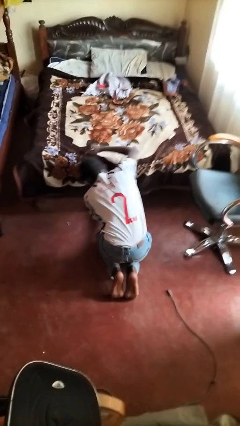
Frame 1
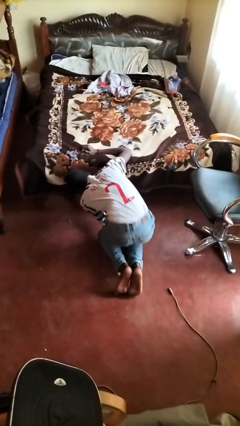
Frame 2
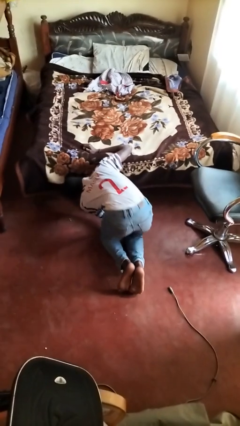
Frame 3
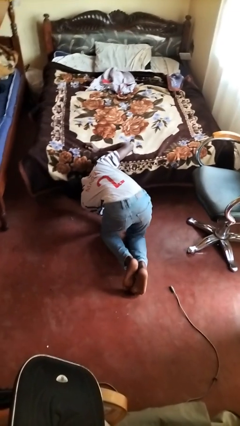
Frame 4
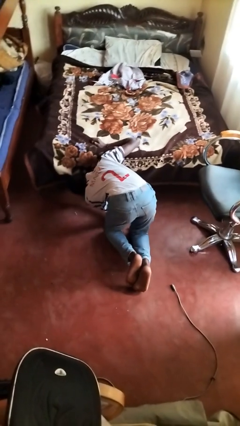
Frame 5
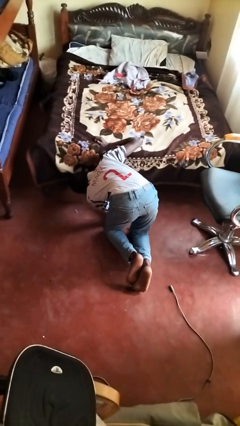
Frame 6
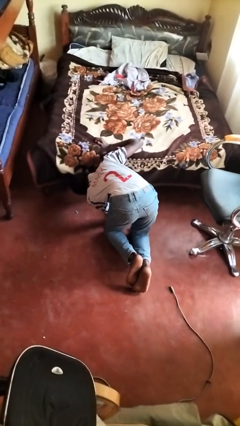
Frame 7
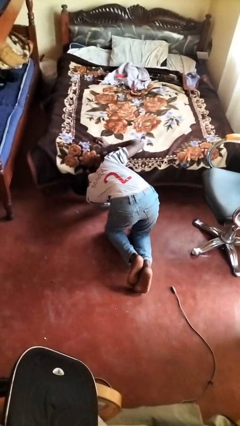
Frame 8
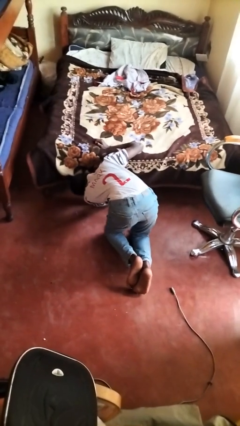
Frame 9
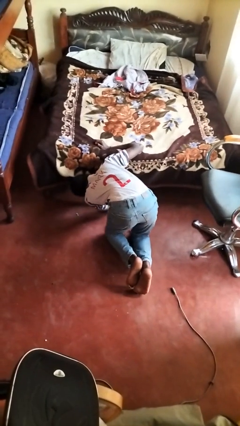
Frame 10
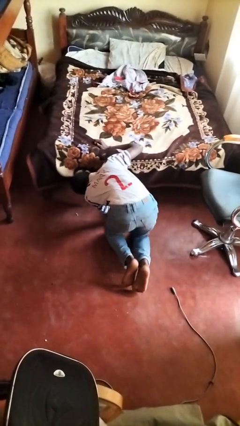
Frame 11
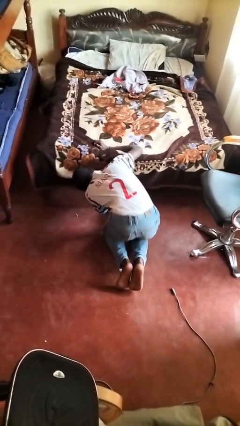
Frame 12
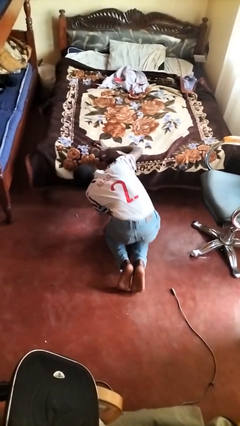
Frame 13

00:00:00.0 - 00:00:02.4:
person searches under bed

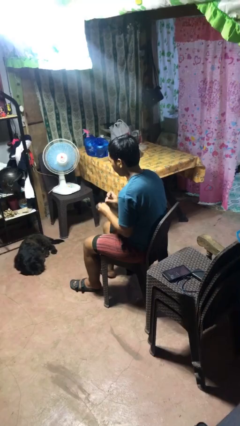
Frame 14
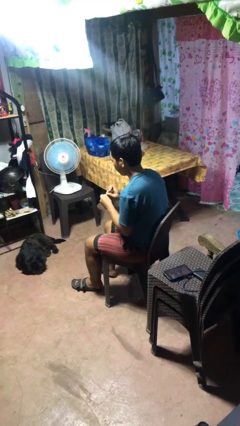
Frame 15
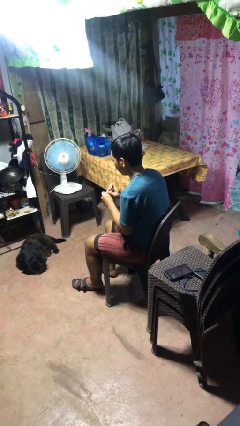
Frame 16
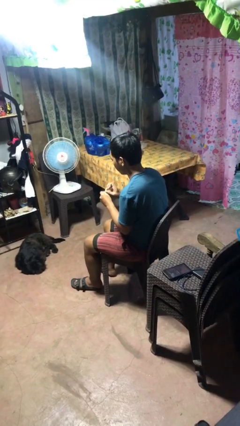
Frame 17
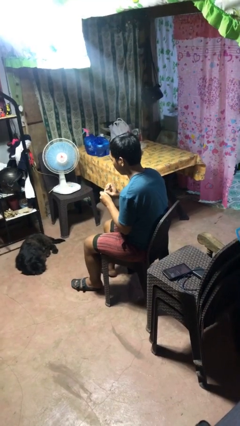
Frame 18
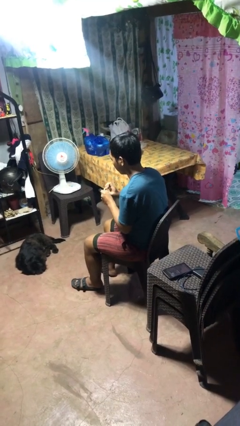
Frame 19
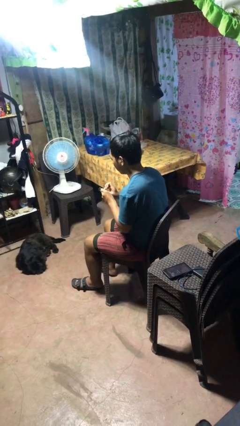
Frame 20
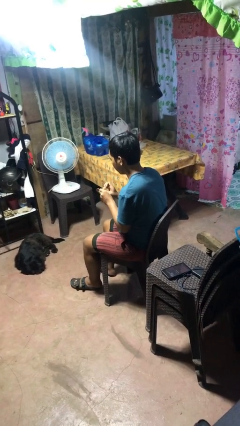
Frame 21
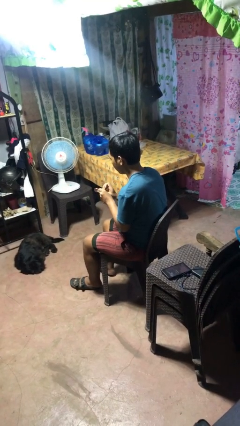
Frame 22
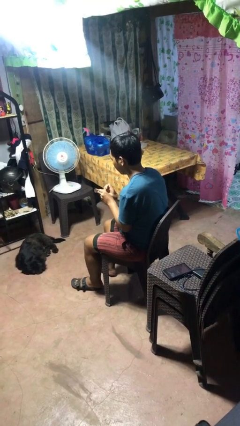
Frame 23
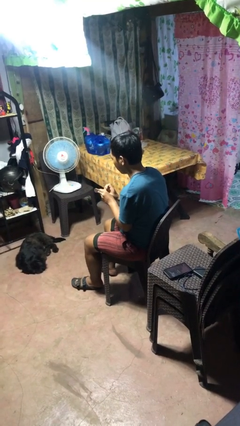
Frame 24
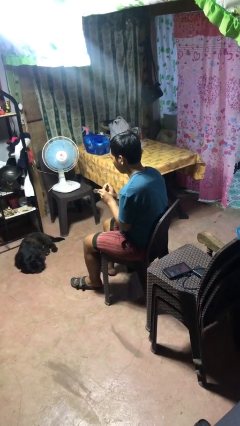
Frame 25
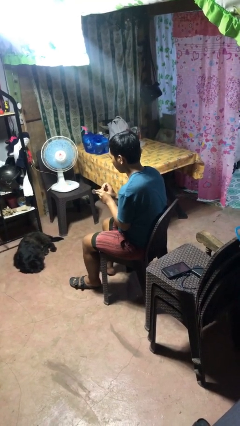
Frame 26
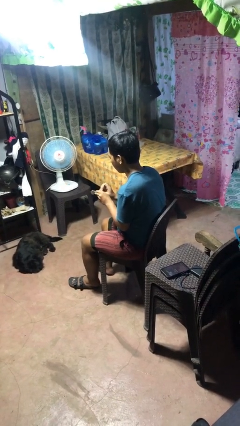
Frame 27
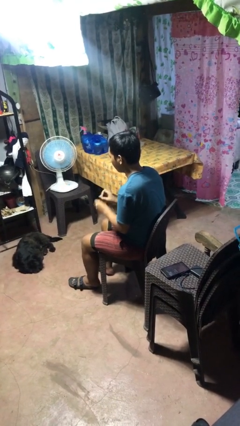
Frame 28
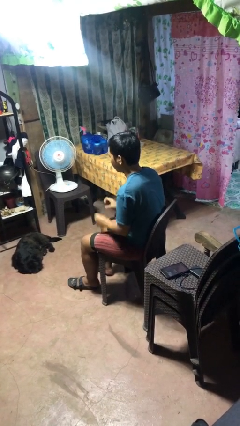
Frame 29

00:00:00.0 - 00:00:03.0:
person files fingernails

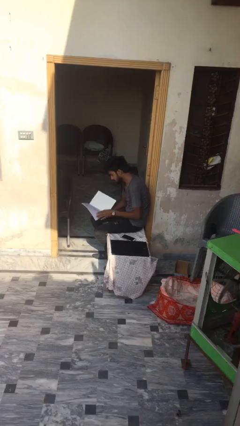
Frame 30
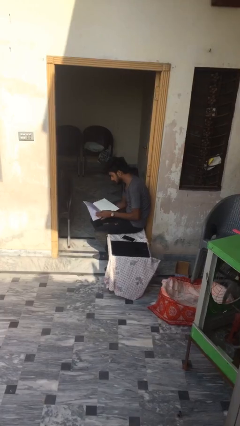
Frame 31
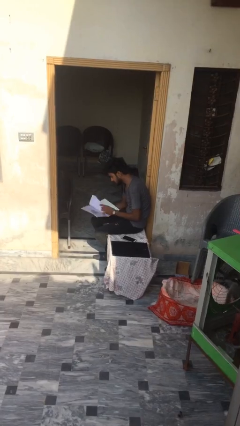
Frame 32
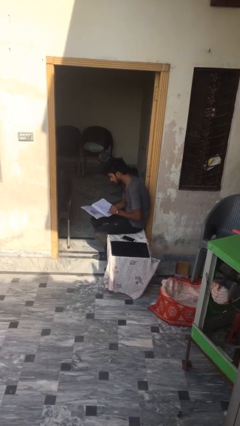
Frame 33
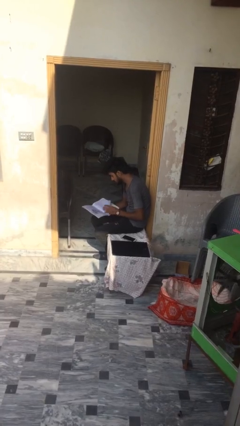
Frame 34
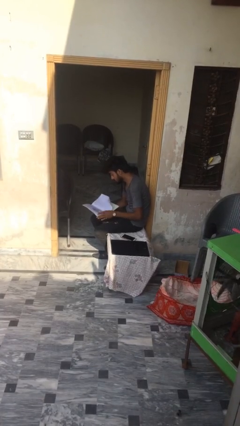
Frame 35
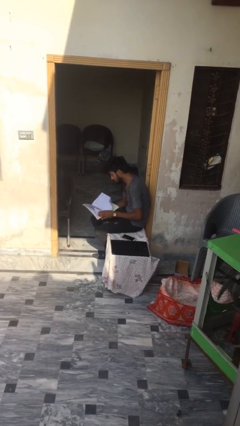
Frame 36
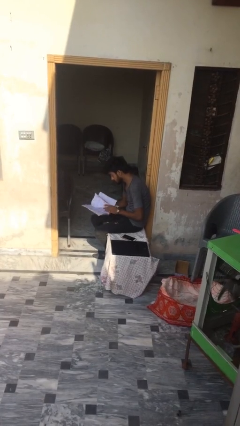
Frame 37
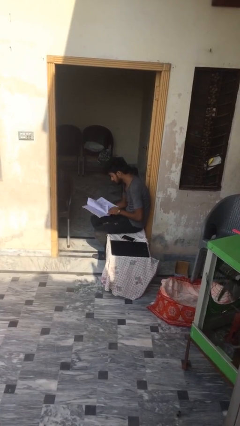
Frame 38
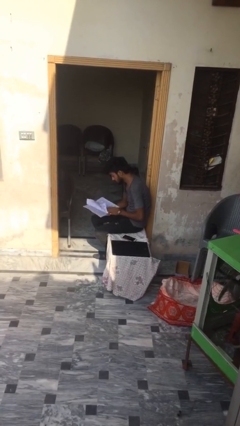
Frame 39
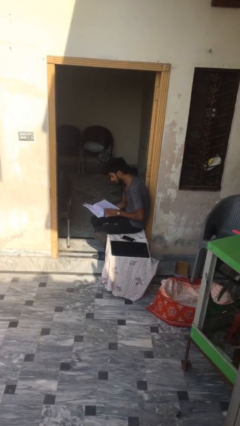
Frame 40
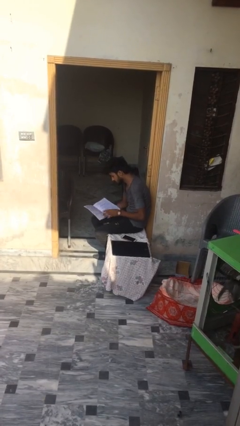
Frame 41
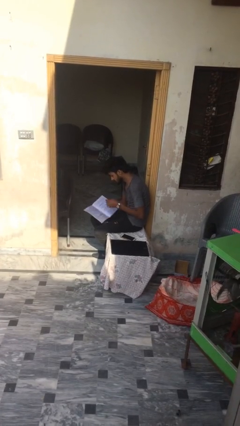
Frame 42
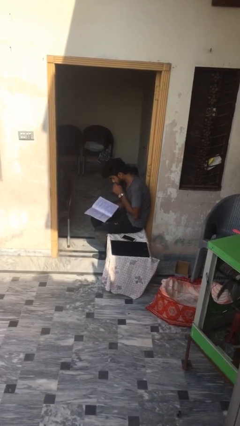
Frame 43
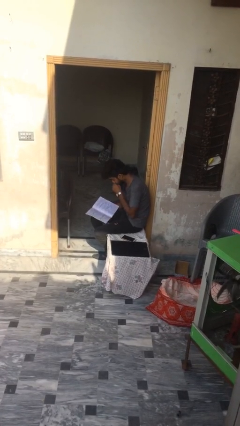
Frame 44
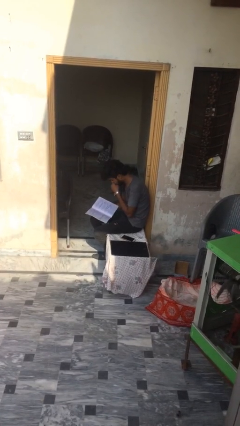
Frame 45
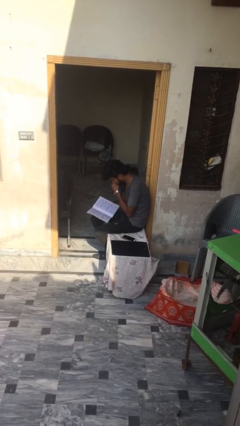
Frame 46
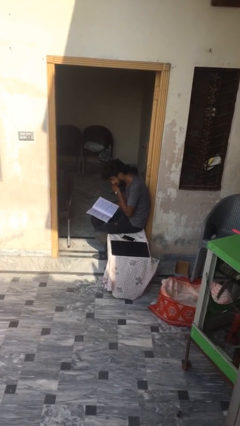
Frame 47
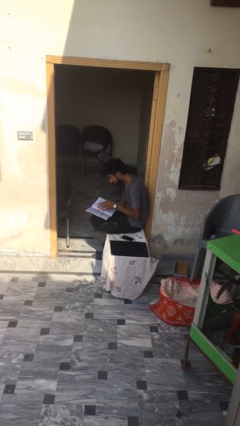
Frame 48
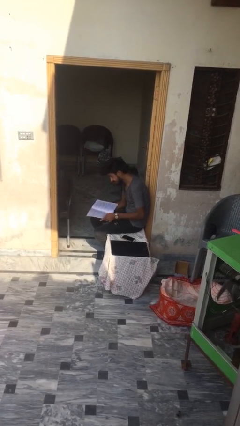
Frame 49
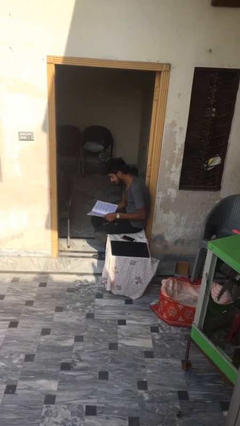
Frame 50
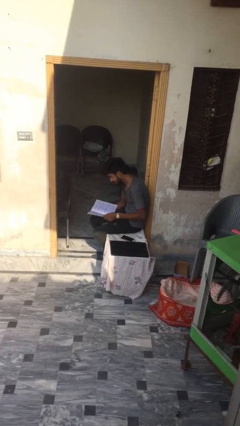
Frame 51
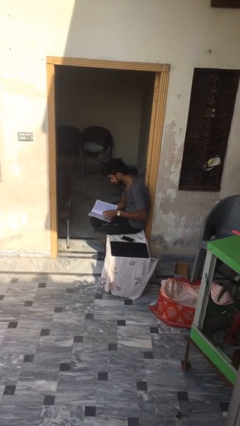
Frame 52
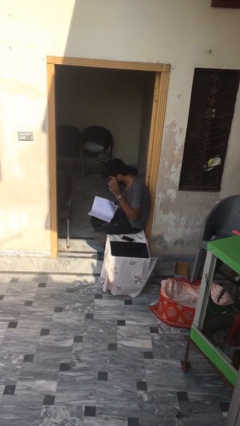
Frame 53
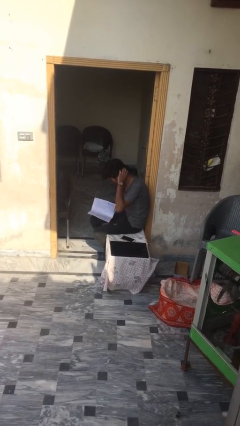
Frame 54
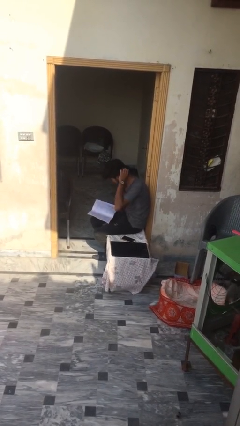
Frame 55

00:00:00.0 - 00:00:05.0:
person reads document

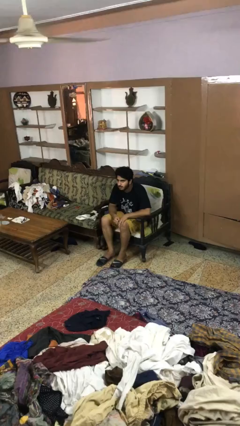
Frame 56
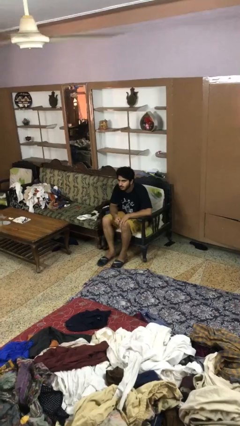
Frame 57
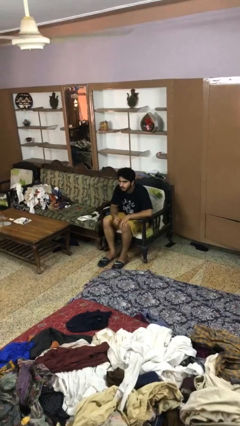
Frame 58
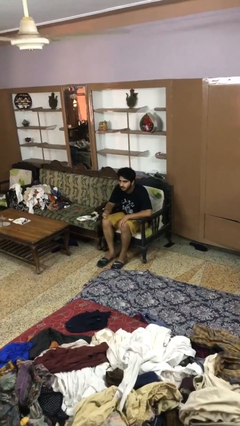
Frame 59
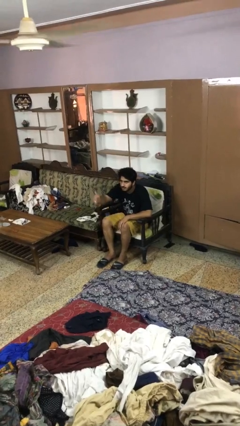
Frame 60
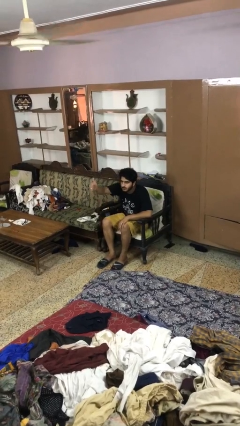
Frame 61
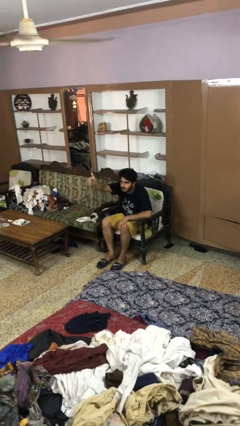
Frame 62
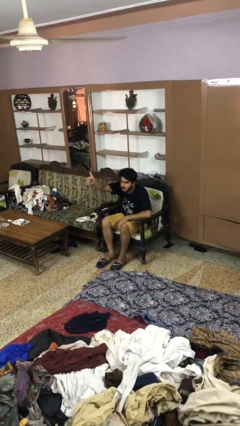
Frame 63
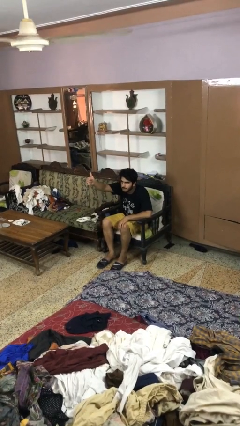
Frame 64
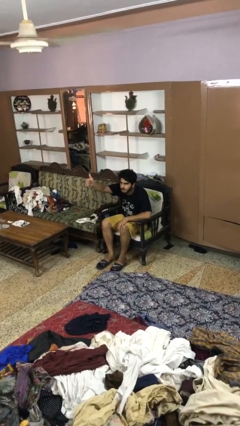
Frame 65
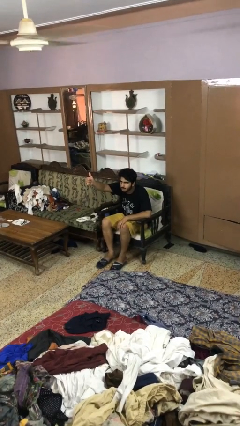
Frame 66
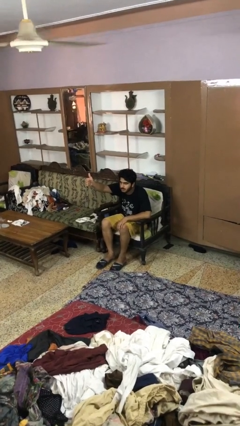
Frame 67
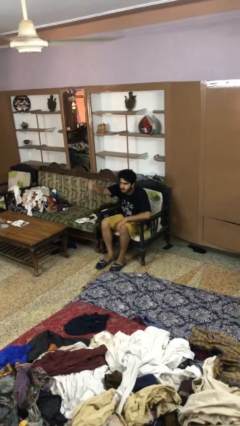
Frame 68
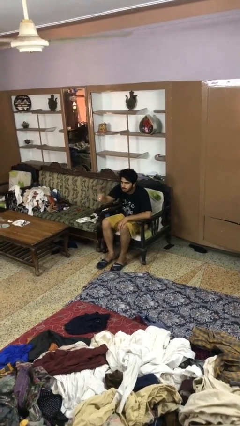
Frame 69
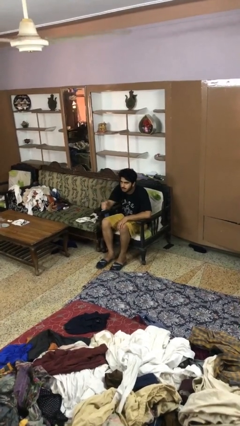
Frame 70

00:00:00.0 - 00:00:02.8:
person gestures thumbs up

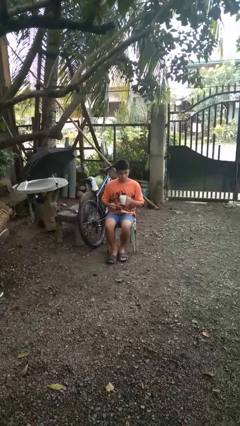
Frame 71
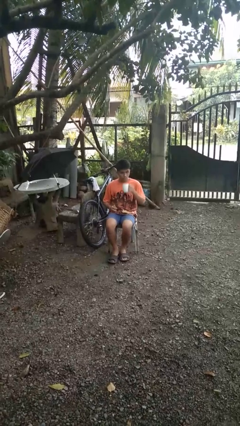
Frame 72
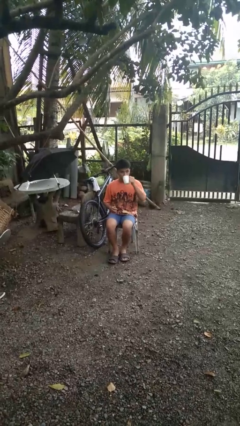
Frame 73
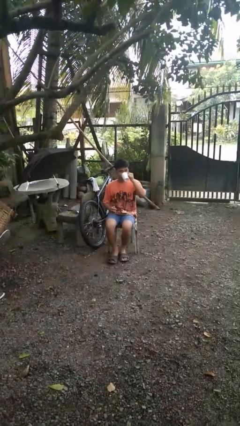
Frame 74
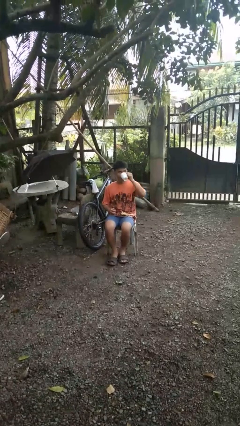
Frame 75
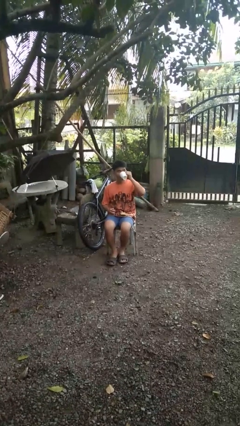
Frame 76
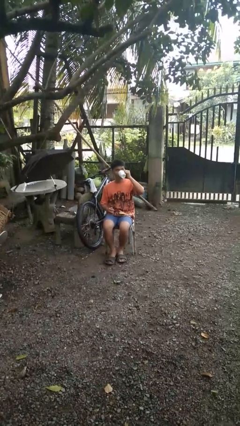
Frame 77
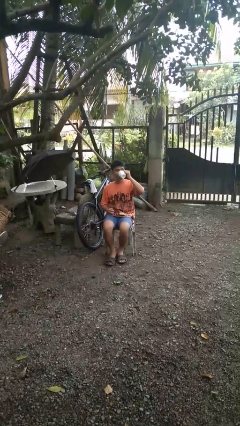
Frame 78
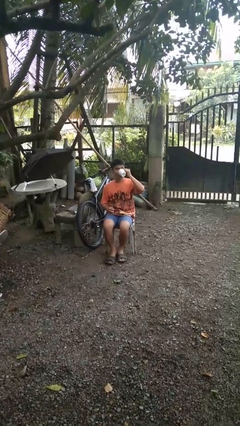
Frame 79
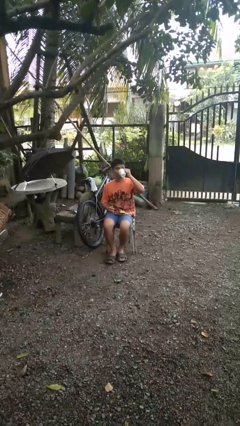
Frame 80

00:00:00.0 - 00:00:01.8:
person drinks from mug

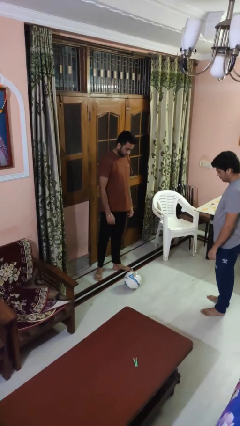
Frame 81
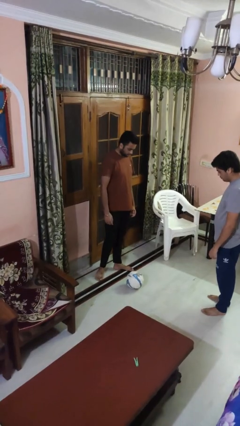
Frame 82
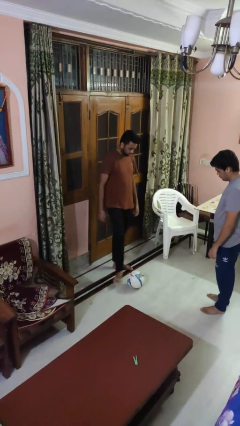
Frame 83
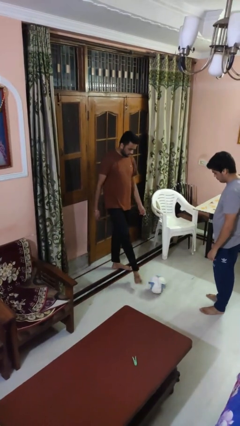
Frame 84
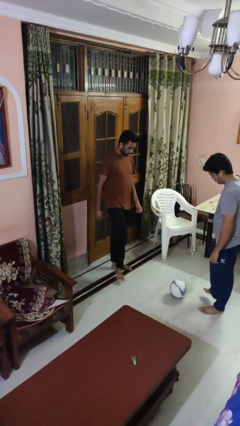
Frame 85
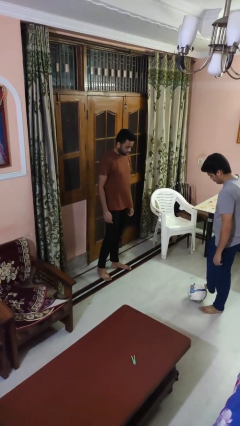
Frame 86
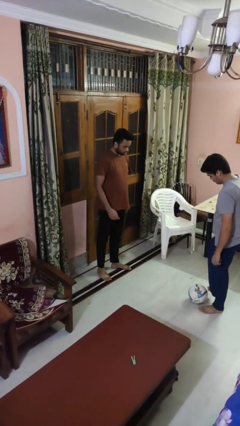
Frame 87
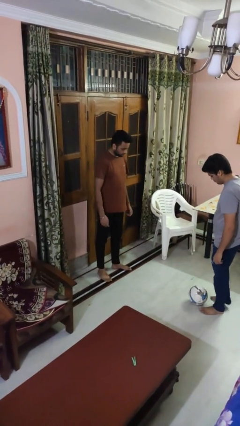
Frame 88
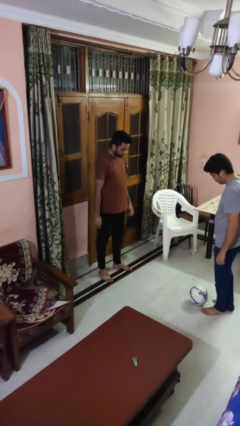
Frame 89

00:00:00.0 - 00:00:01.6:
person kicks object to person

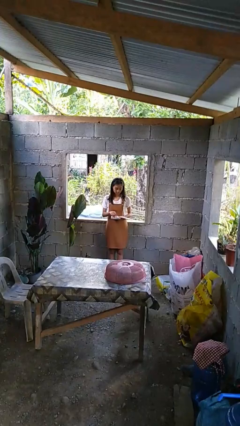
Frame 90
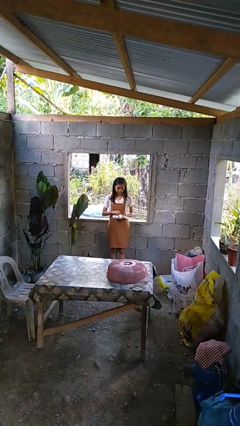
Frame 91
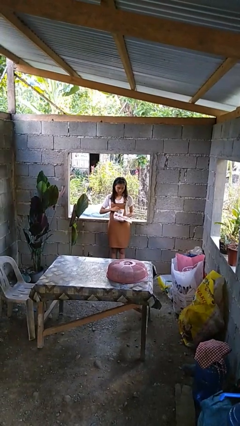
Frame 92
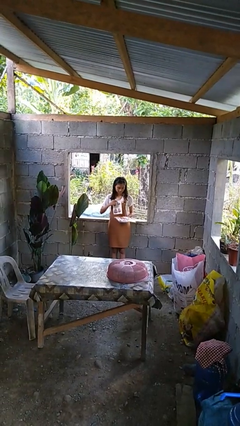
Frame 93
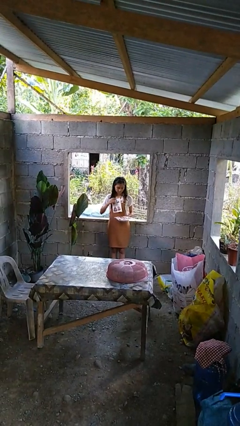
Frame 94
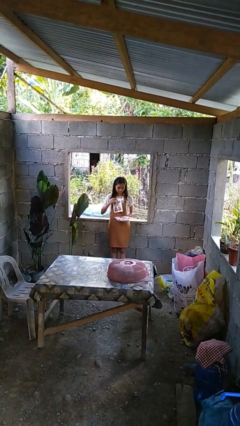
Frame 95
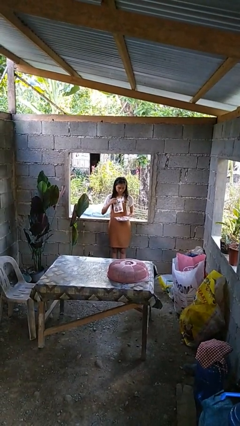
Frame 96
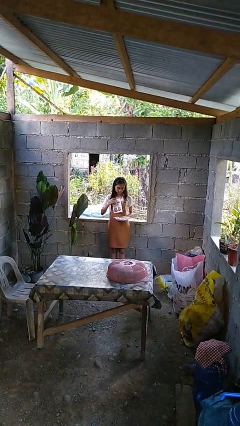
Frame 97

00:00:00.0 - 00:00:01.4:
person tears paper
